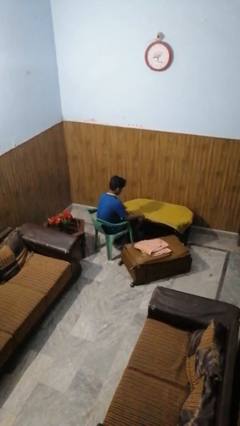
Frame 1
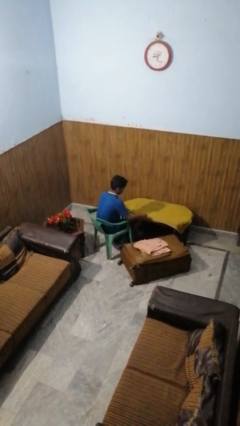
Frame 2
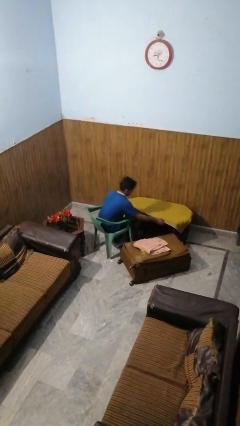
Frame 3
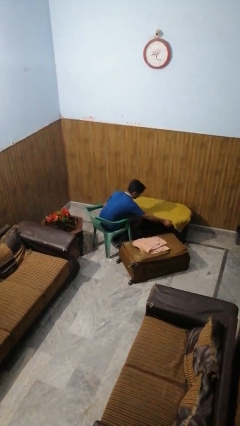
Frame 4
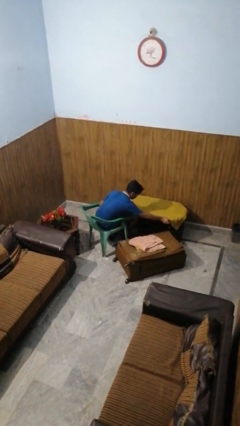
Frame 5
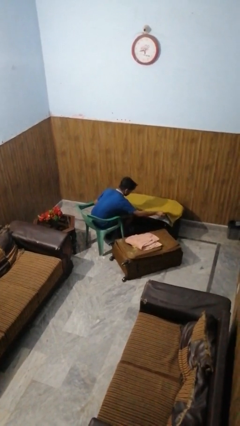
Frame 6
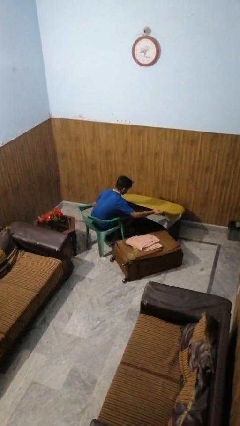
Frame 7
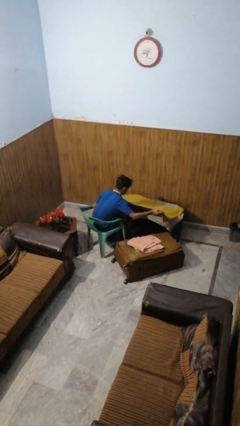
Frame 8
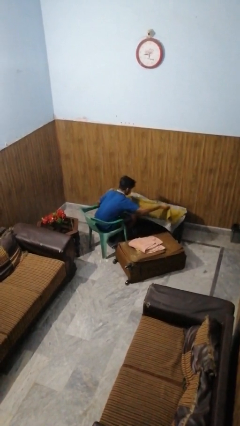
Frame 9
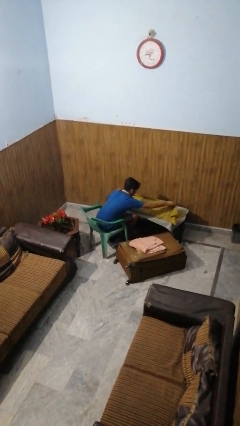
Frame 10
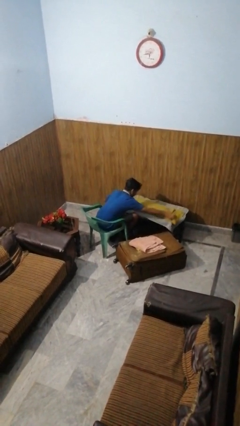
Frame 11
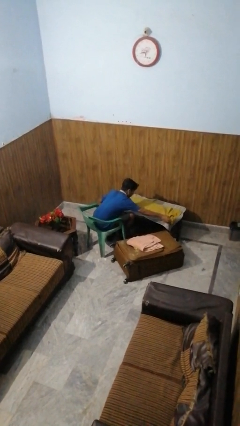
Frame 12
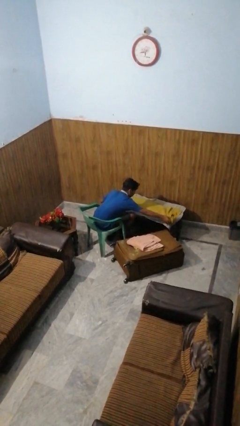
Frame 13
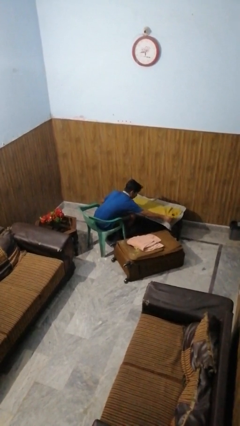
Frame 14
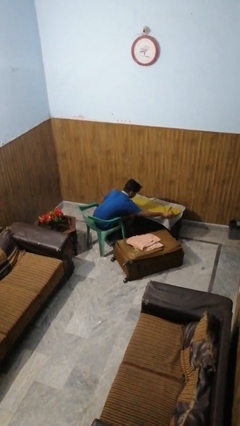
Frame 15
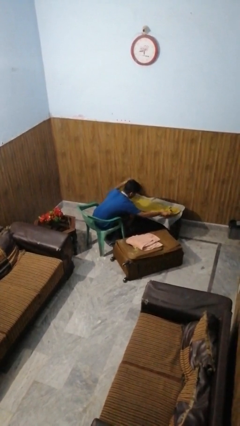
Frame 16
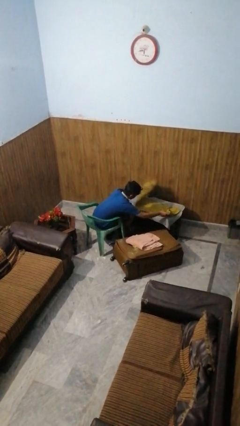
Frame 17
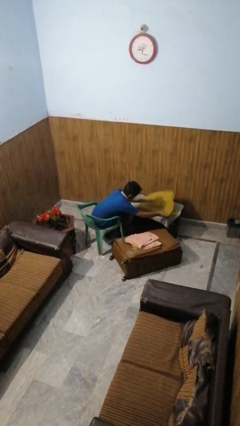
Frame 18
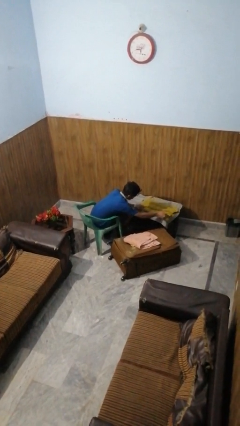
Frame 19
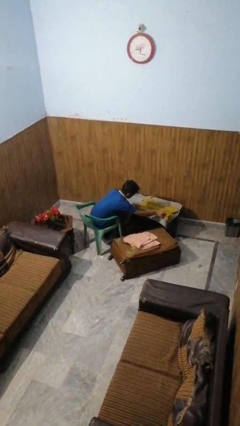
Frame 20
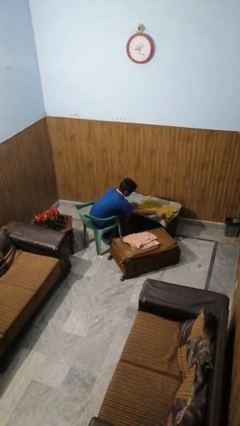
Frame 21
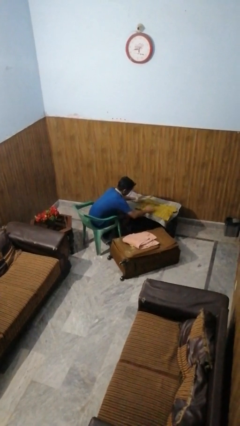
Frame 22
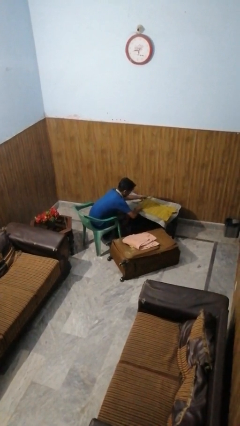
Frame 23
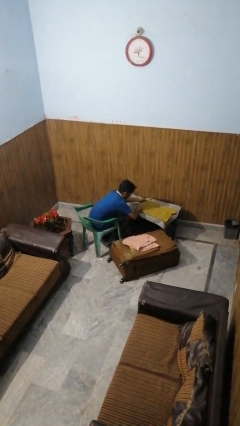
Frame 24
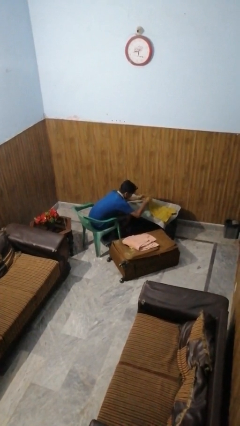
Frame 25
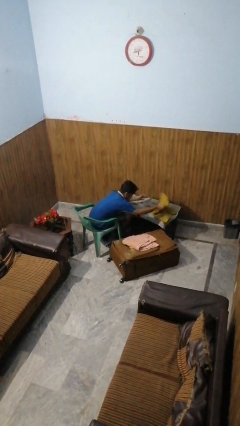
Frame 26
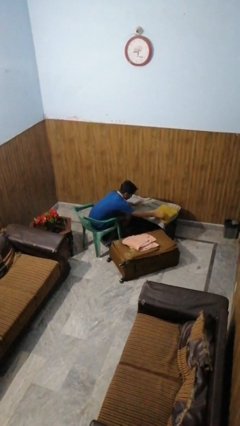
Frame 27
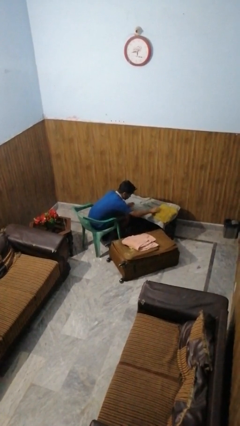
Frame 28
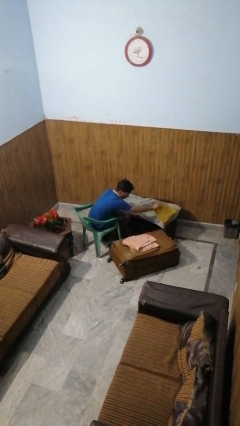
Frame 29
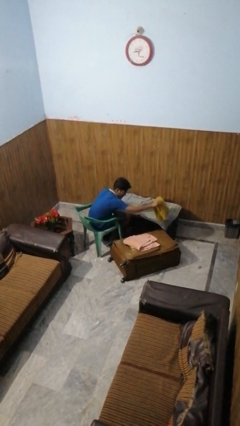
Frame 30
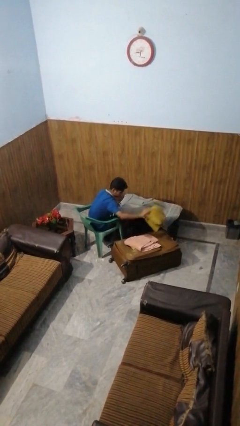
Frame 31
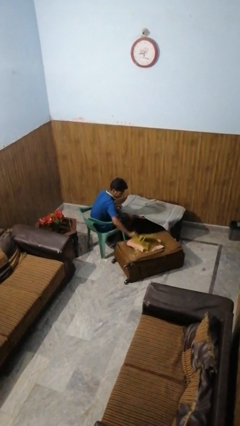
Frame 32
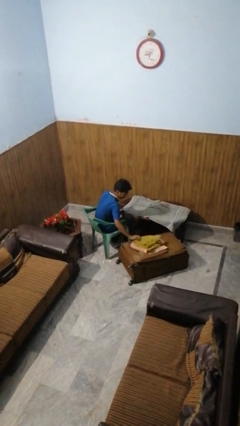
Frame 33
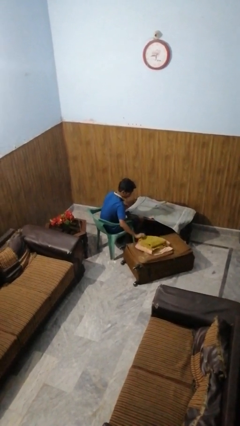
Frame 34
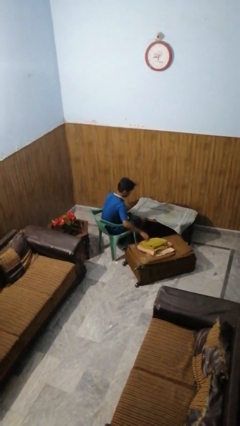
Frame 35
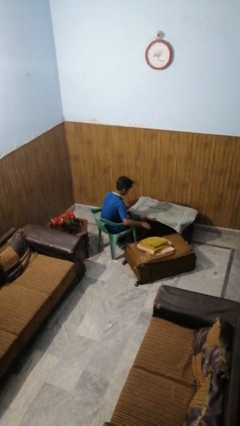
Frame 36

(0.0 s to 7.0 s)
person folds towel

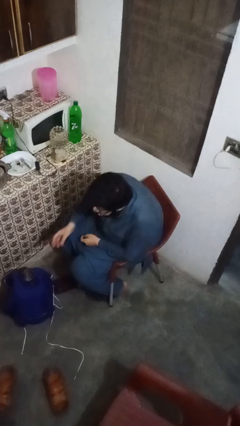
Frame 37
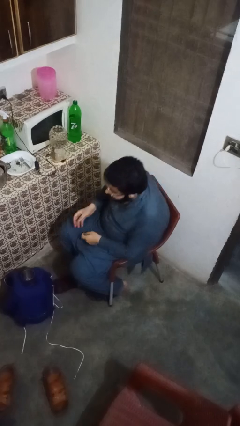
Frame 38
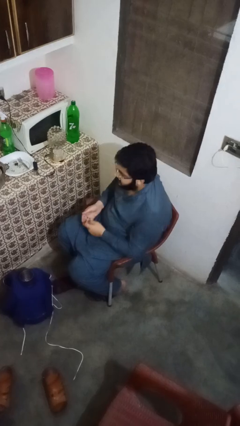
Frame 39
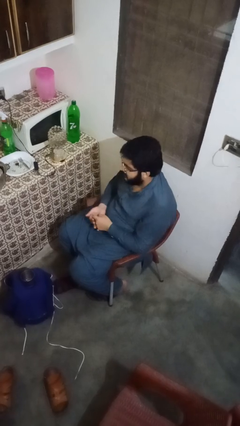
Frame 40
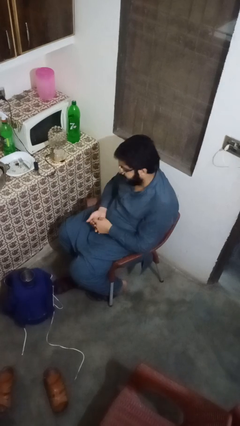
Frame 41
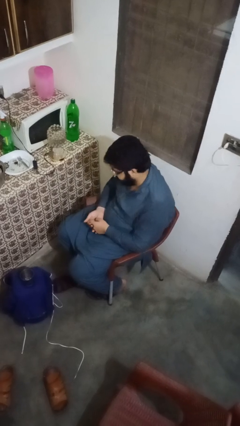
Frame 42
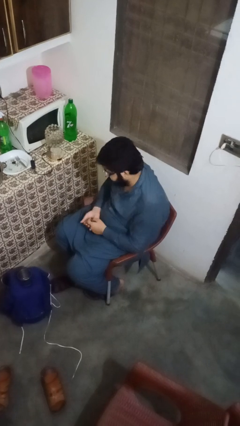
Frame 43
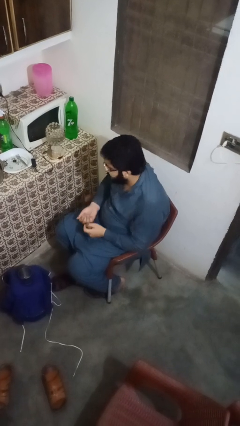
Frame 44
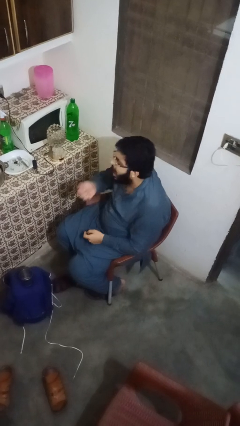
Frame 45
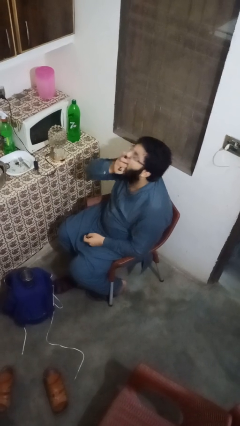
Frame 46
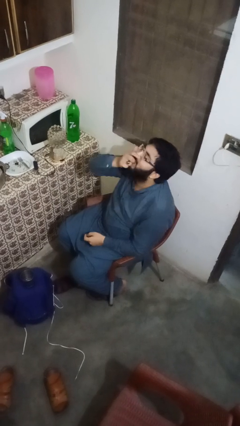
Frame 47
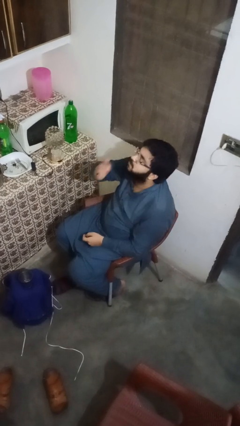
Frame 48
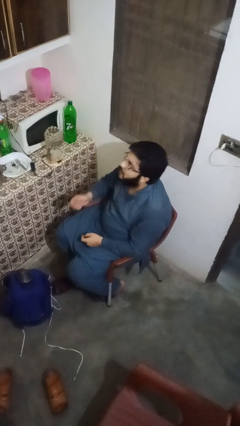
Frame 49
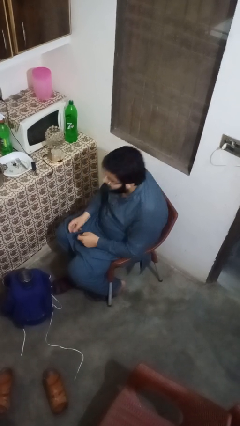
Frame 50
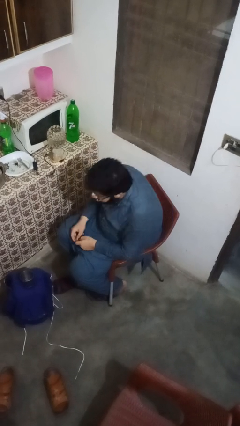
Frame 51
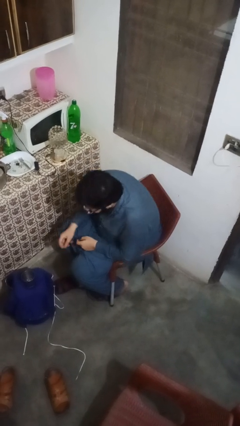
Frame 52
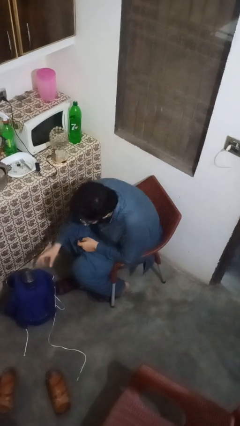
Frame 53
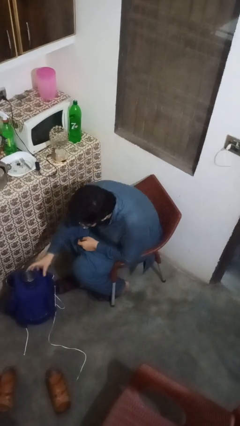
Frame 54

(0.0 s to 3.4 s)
person takes medicine pills

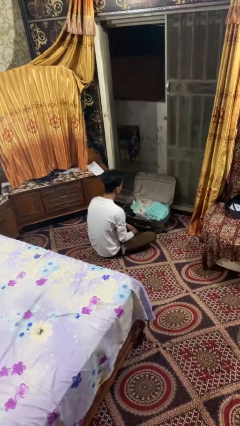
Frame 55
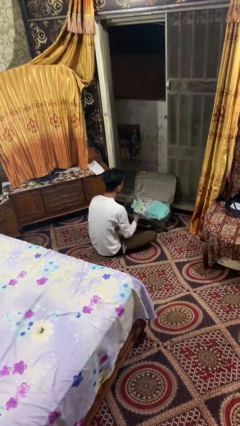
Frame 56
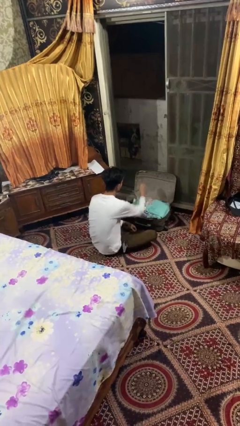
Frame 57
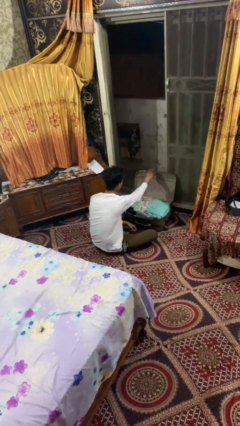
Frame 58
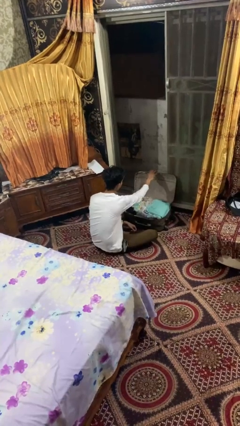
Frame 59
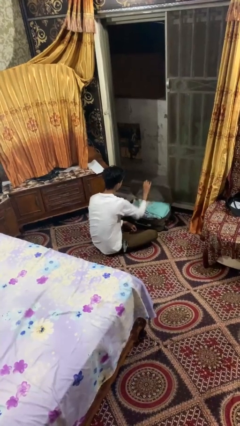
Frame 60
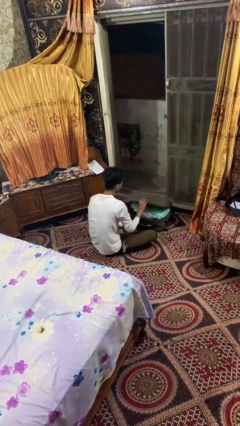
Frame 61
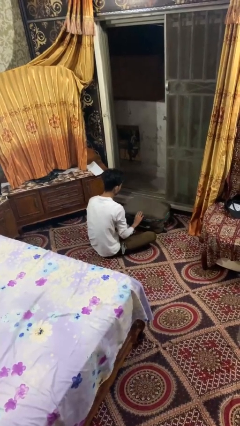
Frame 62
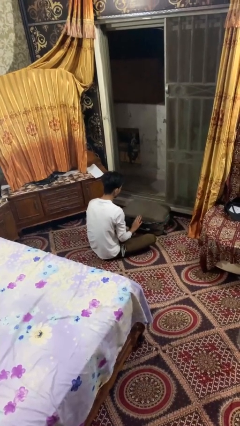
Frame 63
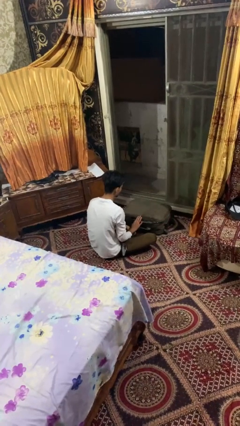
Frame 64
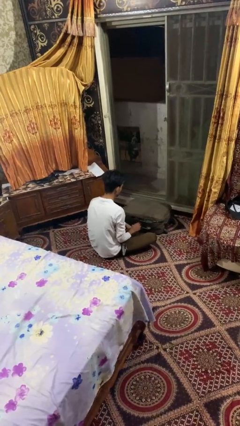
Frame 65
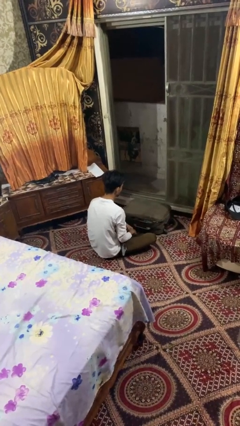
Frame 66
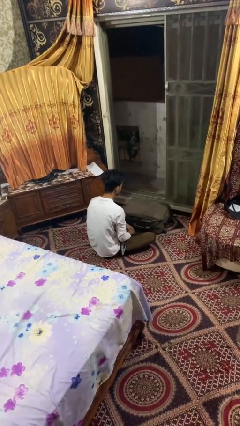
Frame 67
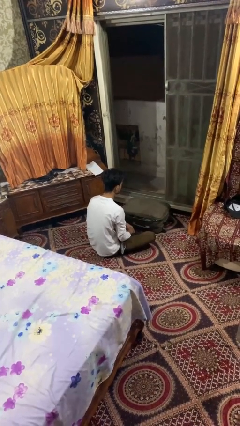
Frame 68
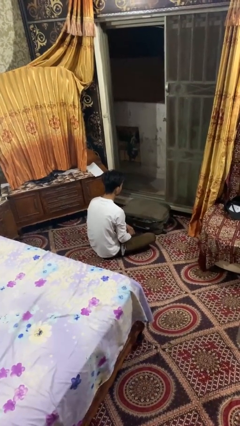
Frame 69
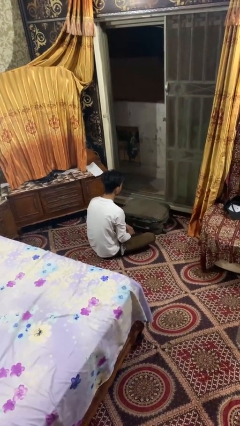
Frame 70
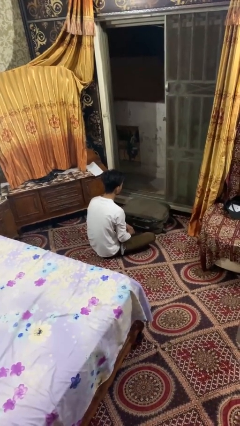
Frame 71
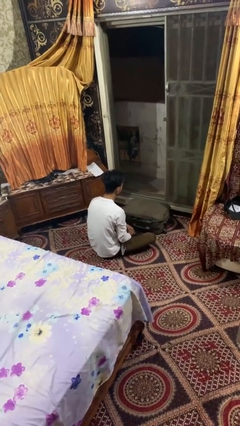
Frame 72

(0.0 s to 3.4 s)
person closes suitcase

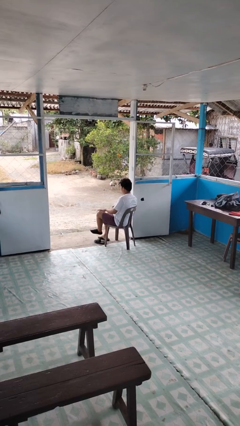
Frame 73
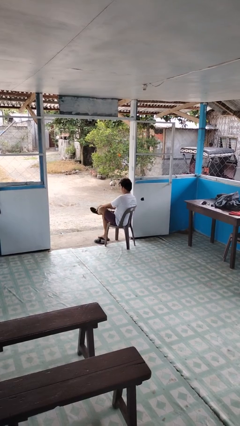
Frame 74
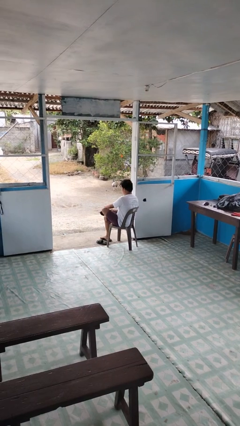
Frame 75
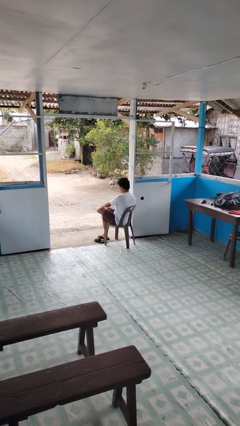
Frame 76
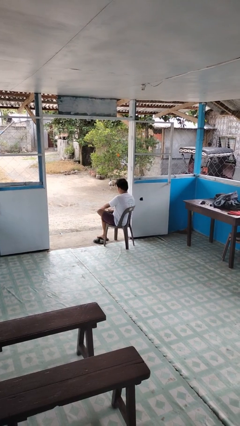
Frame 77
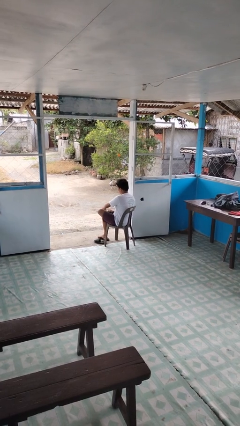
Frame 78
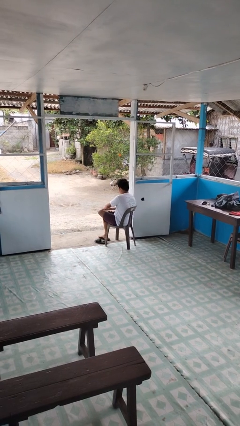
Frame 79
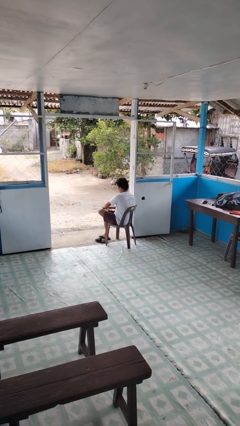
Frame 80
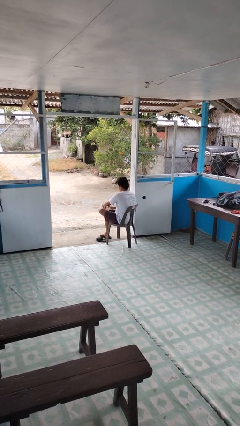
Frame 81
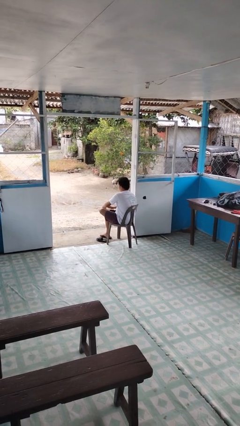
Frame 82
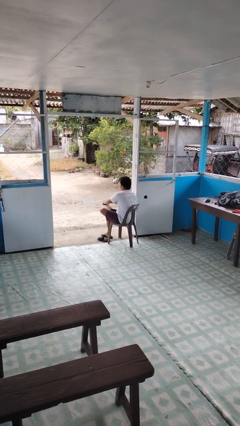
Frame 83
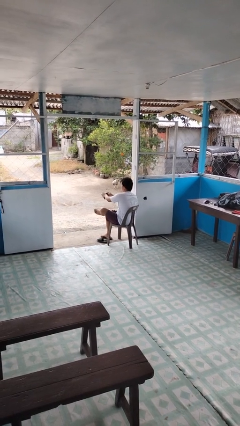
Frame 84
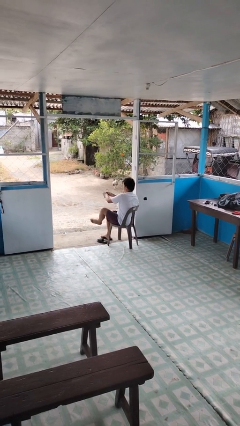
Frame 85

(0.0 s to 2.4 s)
person takes off socks

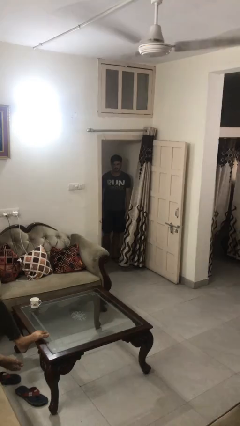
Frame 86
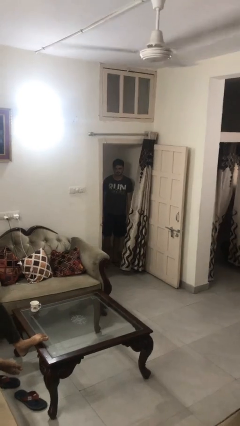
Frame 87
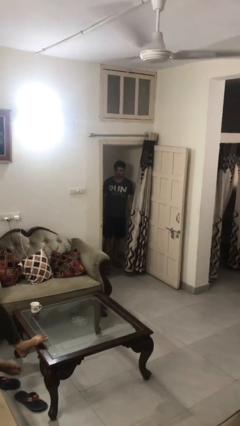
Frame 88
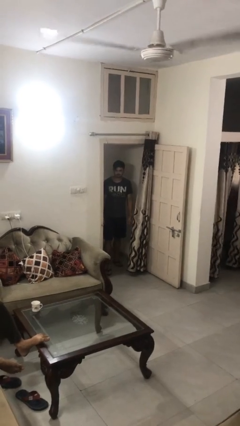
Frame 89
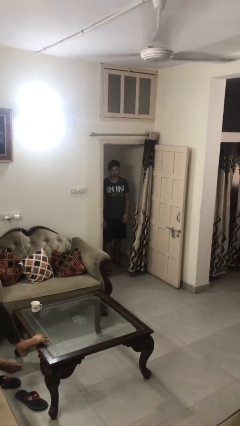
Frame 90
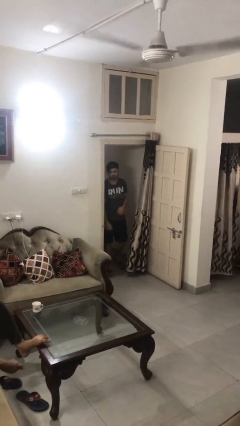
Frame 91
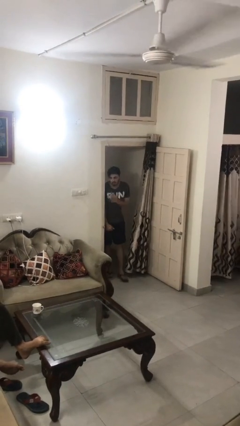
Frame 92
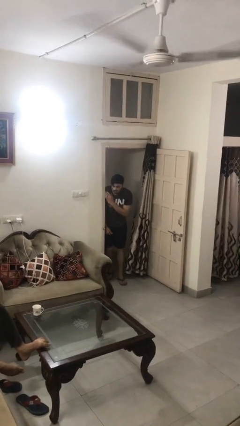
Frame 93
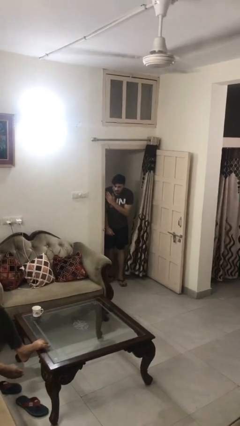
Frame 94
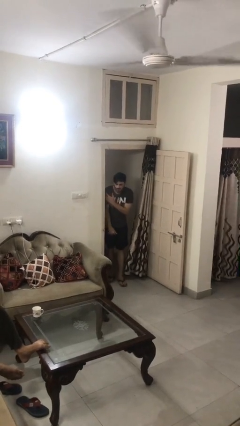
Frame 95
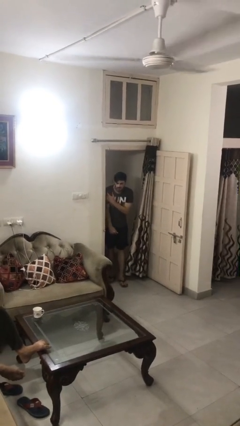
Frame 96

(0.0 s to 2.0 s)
person bumps into wall
